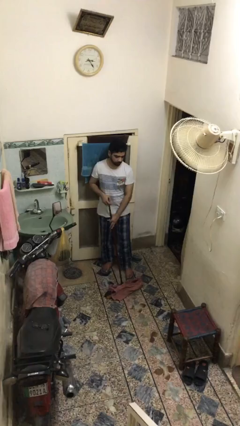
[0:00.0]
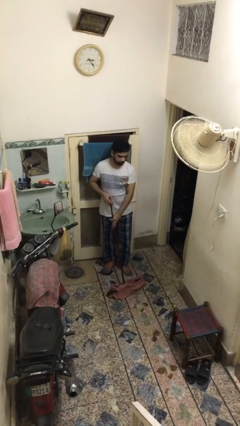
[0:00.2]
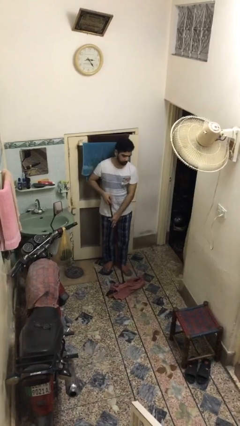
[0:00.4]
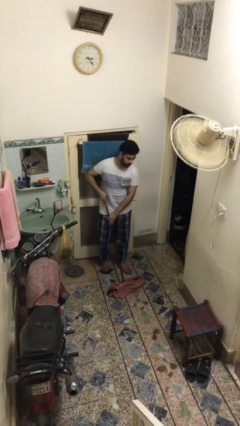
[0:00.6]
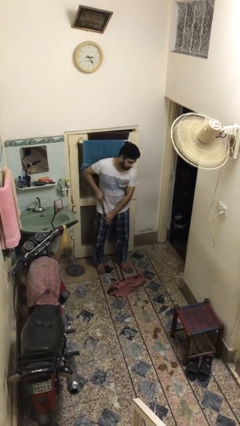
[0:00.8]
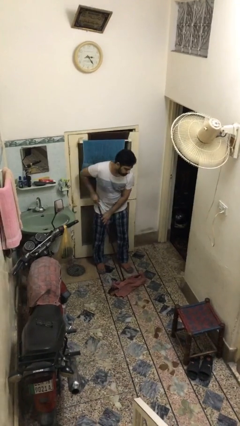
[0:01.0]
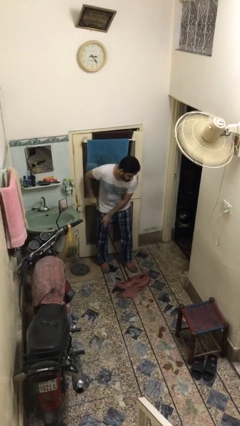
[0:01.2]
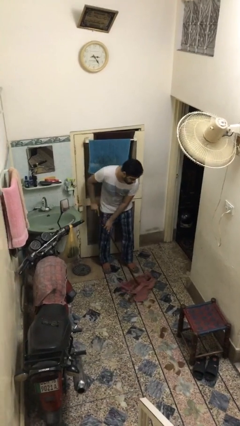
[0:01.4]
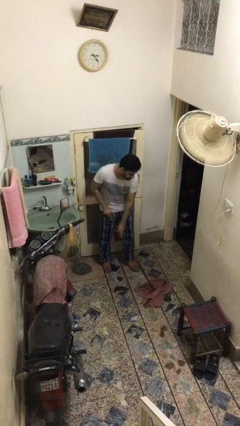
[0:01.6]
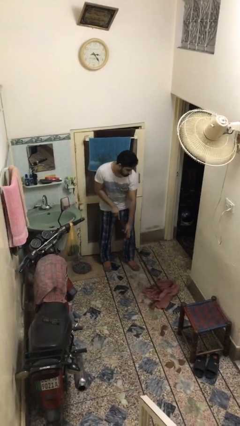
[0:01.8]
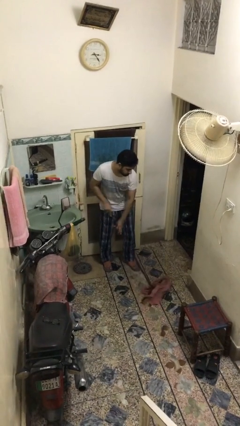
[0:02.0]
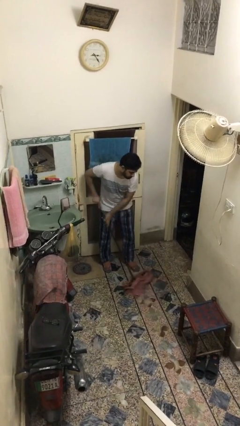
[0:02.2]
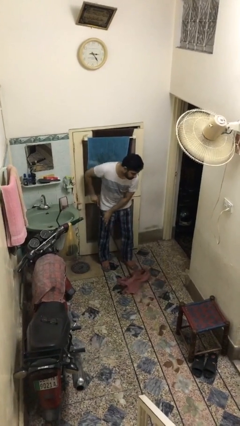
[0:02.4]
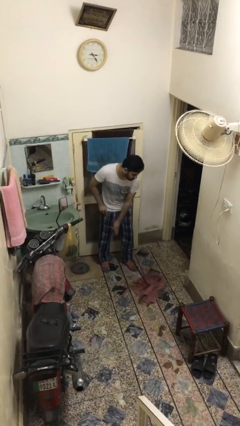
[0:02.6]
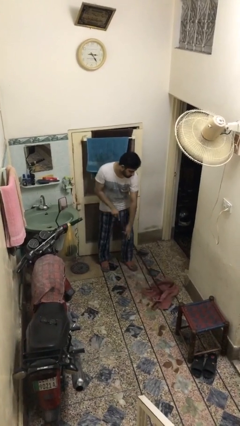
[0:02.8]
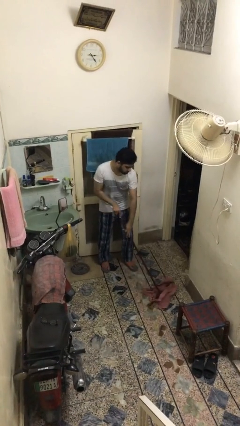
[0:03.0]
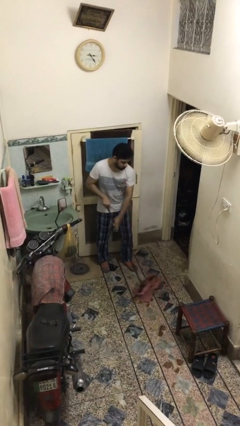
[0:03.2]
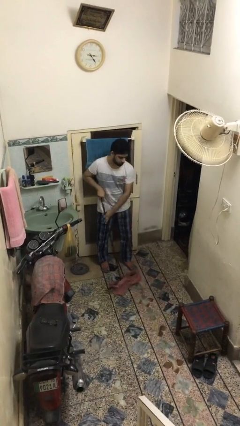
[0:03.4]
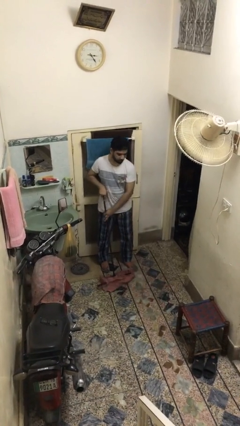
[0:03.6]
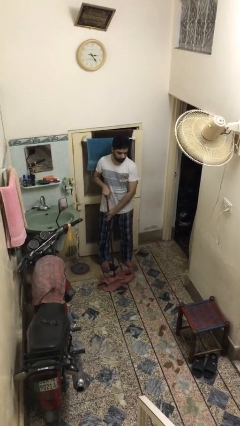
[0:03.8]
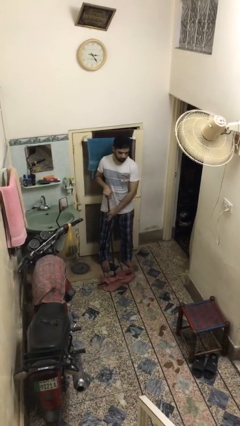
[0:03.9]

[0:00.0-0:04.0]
person mops

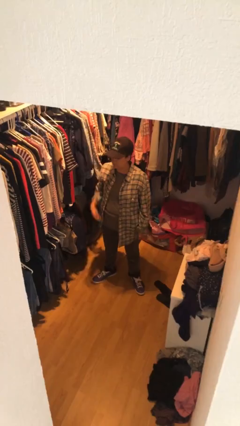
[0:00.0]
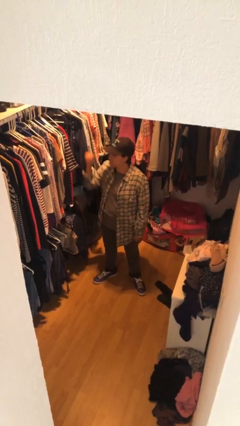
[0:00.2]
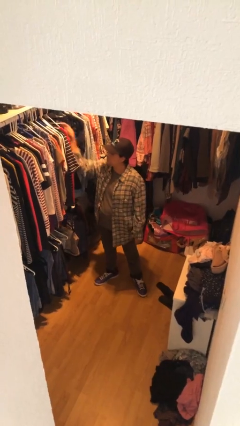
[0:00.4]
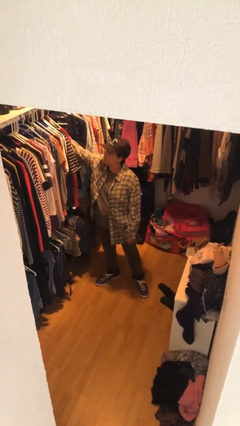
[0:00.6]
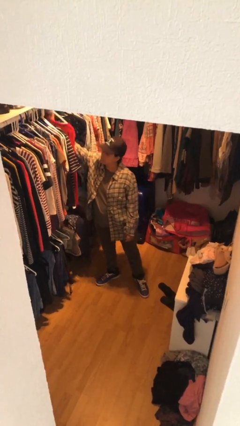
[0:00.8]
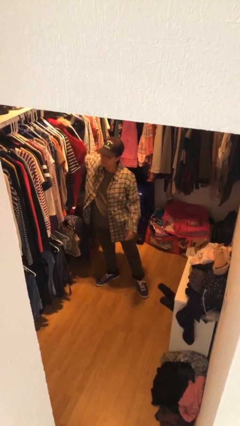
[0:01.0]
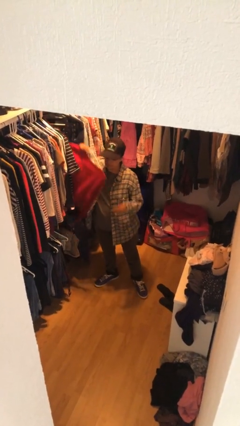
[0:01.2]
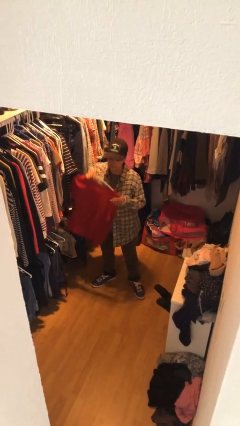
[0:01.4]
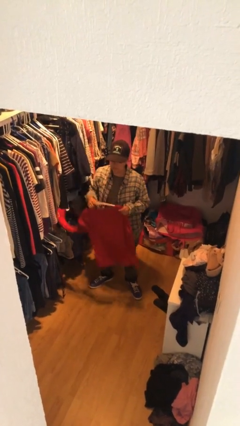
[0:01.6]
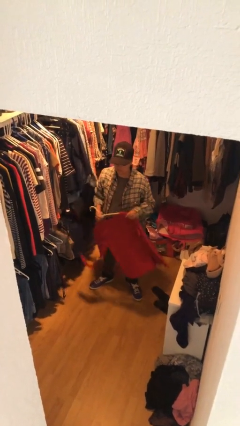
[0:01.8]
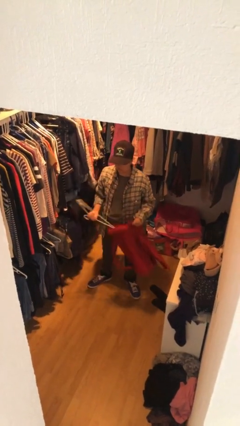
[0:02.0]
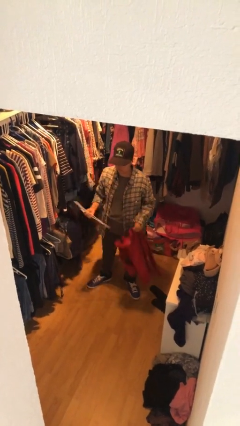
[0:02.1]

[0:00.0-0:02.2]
person takes clothes from closet

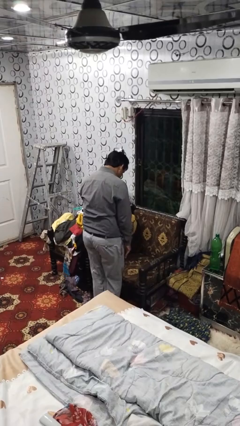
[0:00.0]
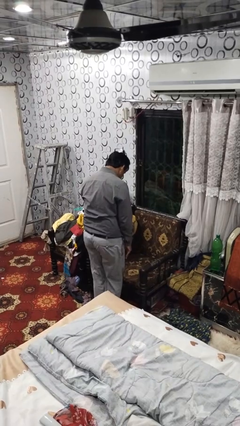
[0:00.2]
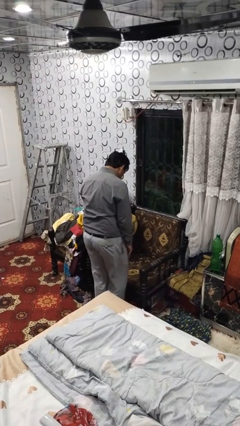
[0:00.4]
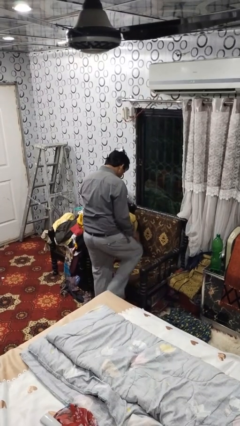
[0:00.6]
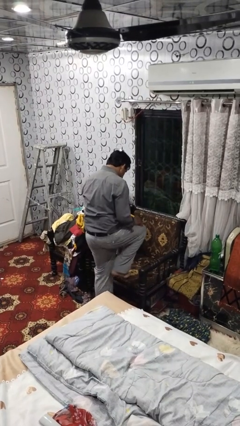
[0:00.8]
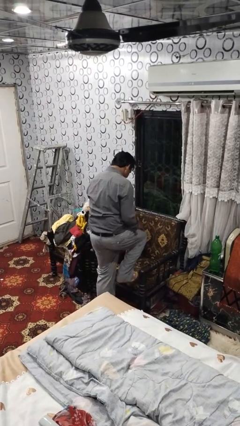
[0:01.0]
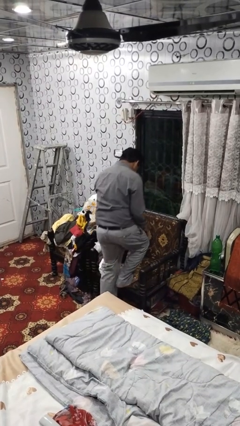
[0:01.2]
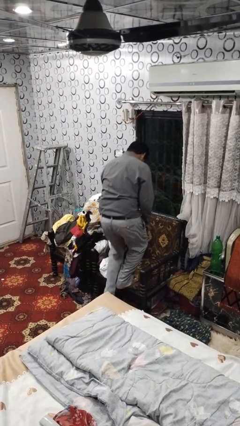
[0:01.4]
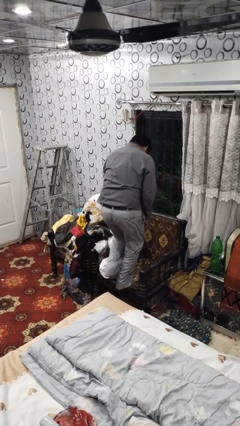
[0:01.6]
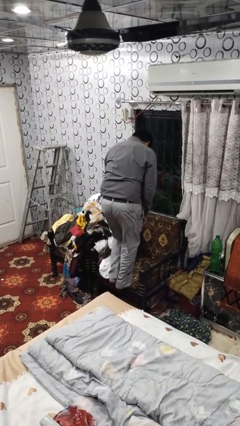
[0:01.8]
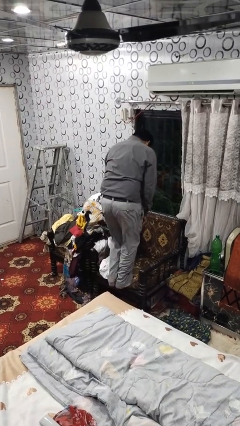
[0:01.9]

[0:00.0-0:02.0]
person climbs on couch

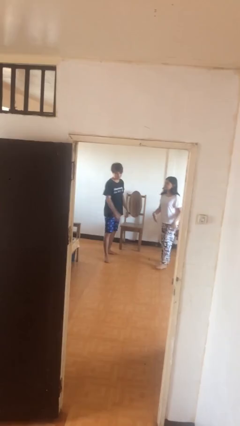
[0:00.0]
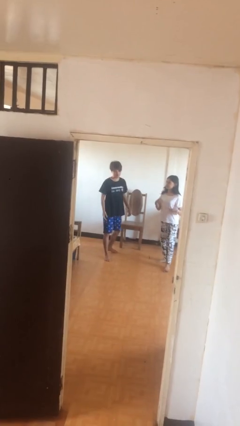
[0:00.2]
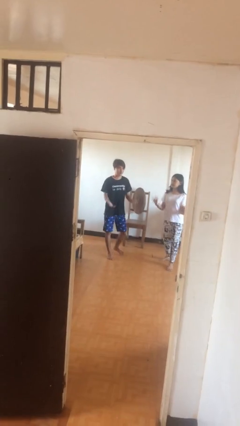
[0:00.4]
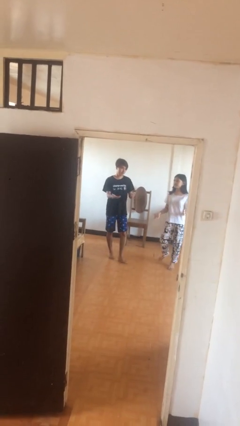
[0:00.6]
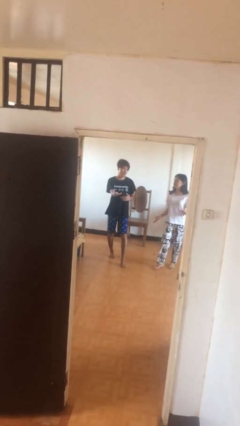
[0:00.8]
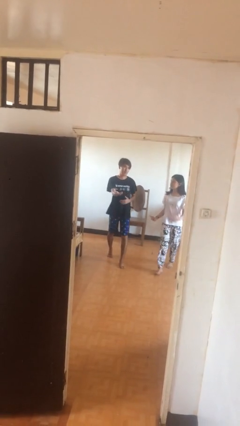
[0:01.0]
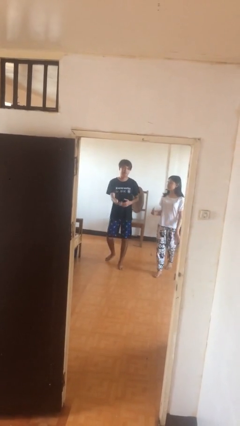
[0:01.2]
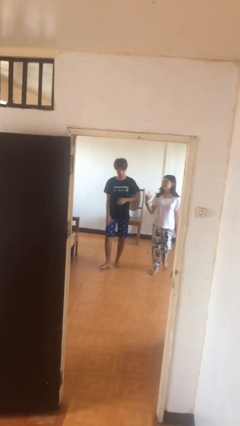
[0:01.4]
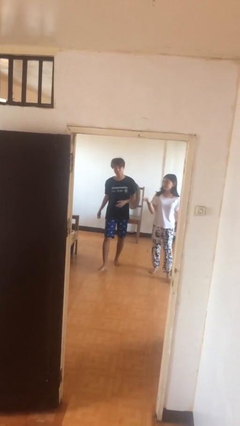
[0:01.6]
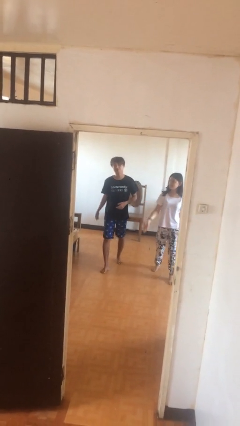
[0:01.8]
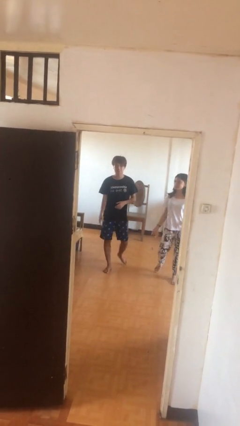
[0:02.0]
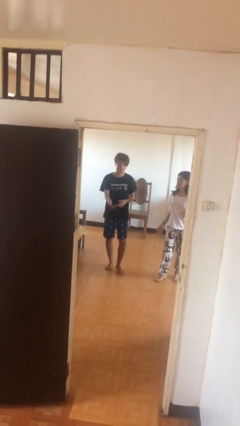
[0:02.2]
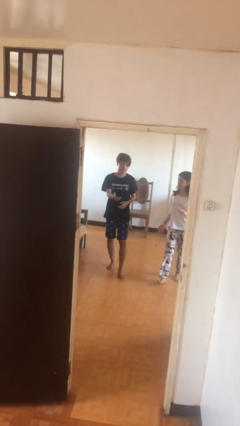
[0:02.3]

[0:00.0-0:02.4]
person talks to person

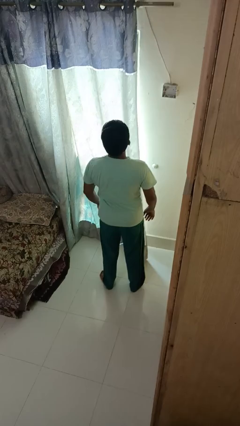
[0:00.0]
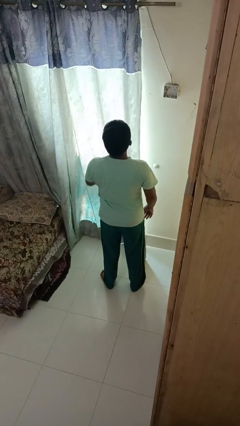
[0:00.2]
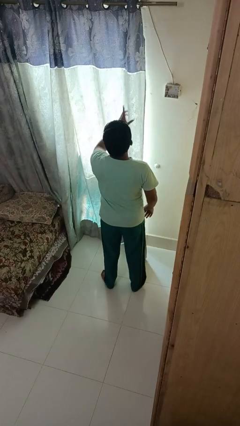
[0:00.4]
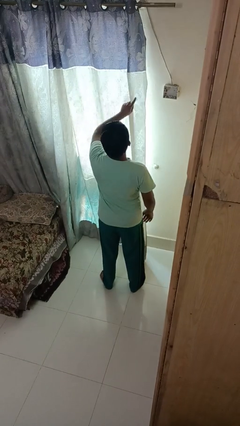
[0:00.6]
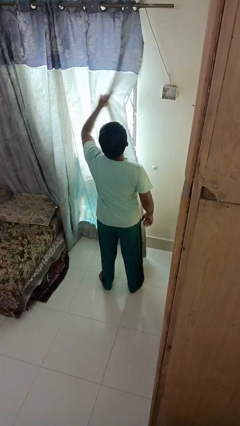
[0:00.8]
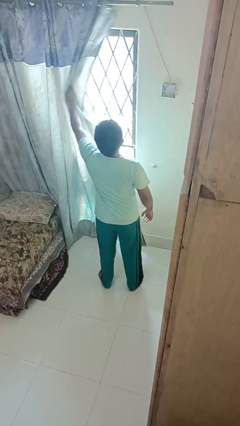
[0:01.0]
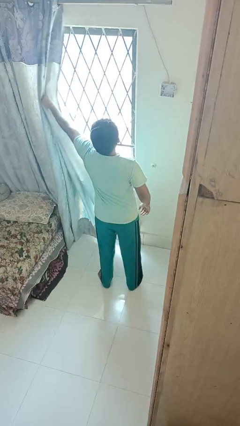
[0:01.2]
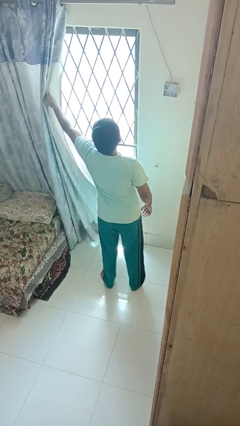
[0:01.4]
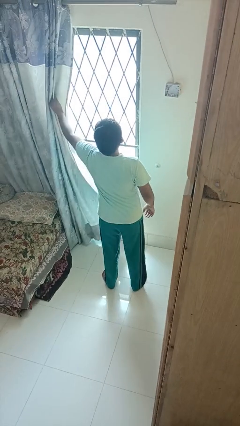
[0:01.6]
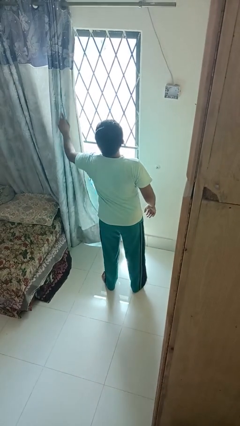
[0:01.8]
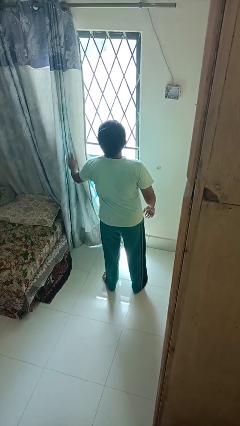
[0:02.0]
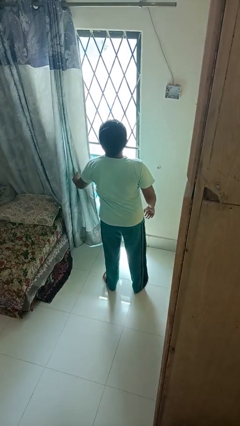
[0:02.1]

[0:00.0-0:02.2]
person opens curtains

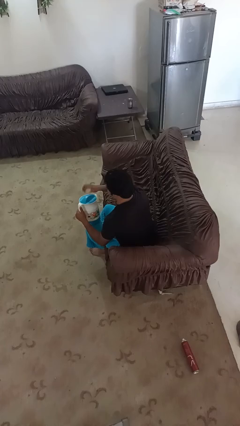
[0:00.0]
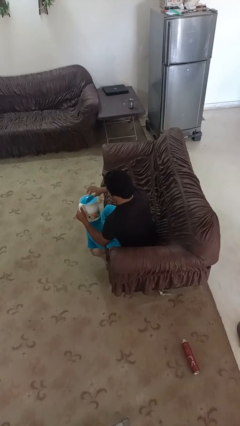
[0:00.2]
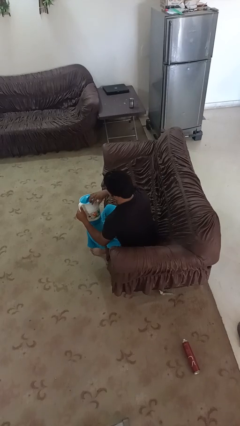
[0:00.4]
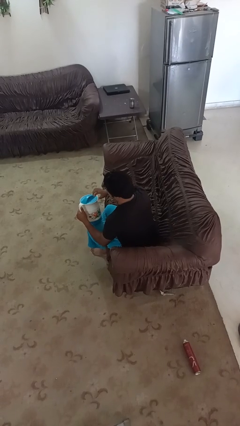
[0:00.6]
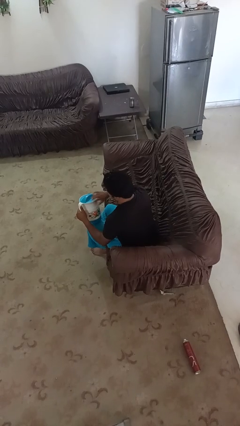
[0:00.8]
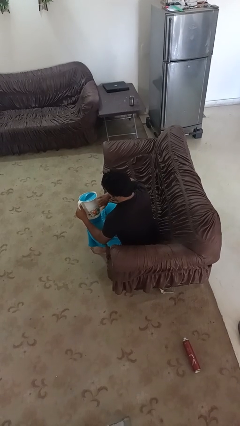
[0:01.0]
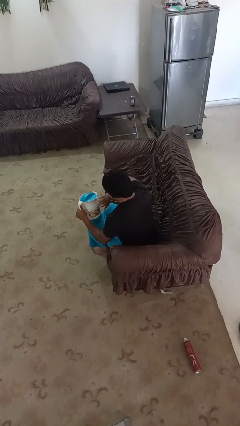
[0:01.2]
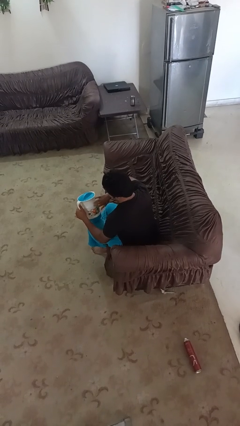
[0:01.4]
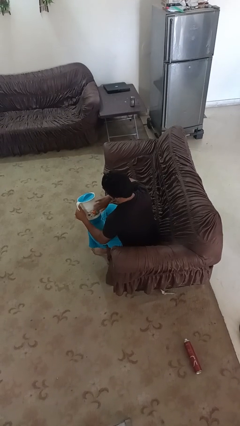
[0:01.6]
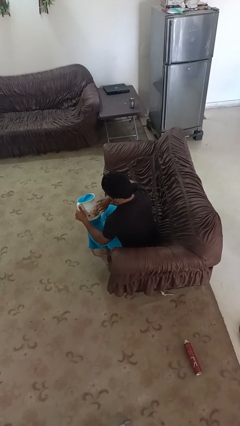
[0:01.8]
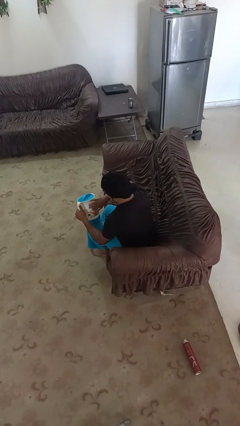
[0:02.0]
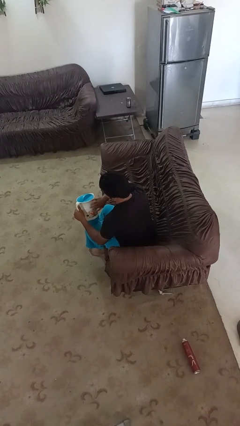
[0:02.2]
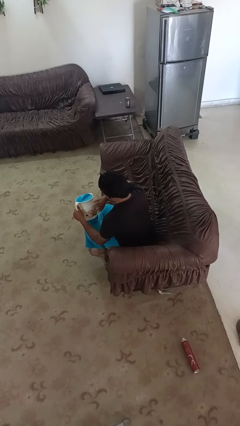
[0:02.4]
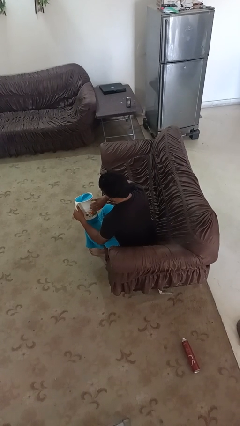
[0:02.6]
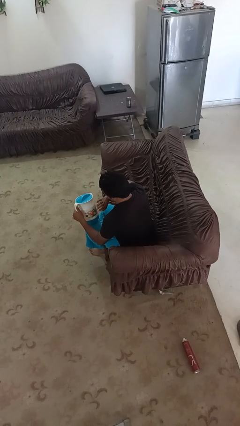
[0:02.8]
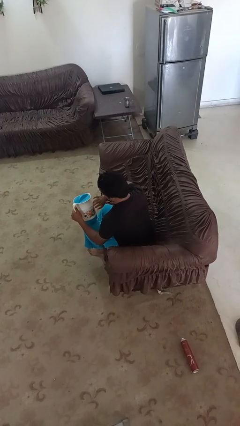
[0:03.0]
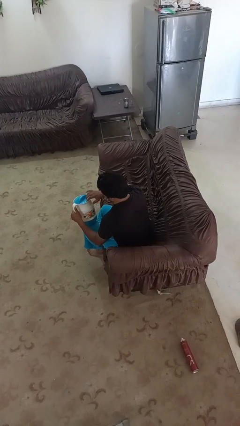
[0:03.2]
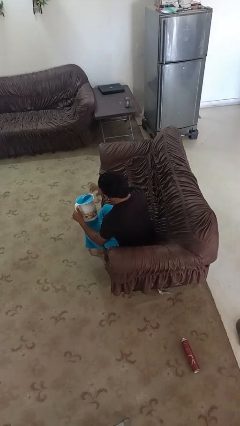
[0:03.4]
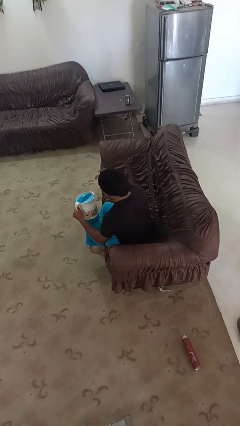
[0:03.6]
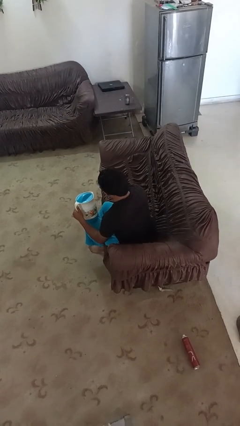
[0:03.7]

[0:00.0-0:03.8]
person taps object with finger

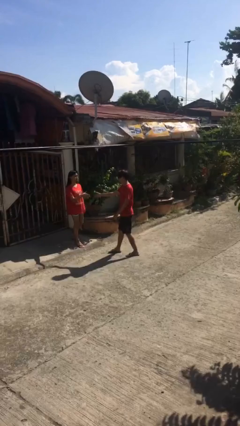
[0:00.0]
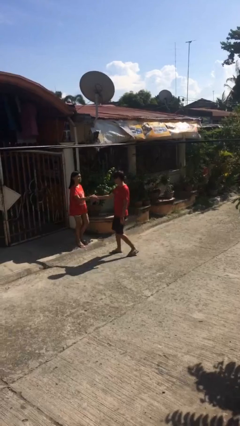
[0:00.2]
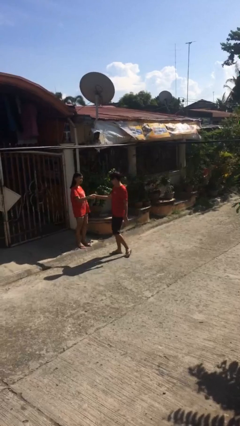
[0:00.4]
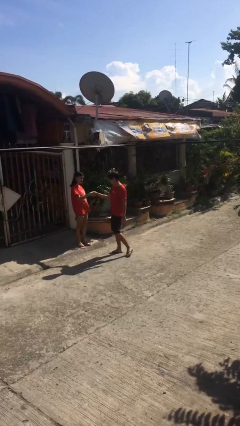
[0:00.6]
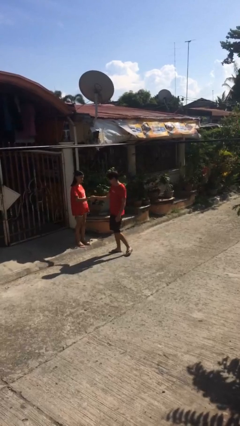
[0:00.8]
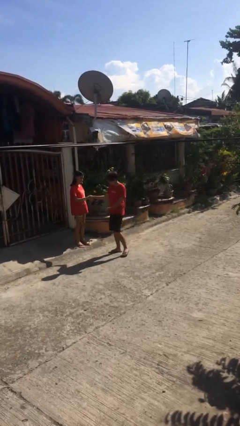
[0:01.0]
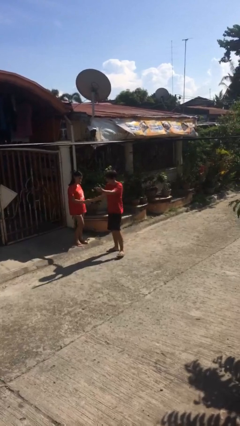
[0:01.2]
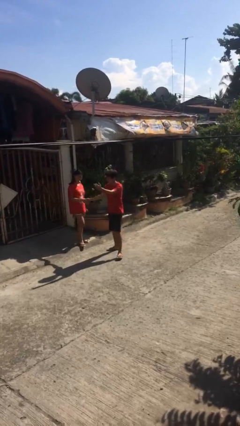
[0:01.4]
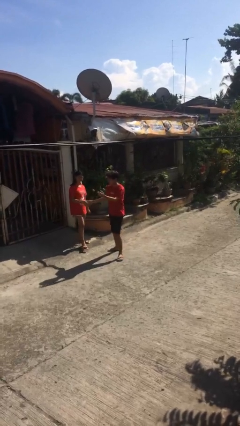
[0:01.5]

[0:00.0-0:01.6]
person shakes hand
